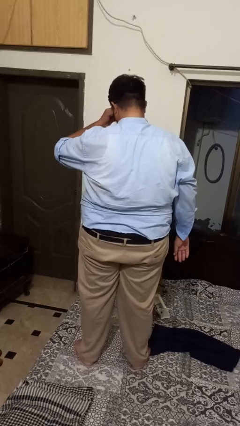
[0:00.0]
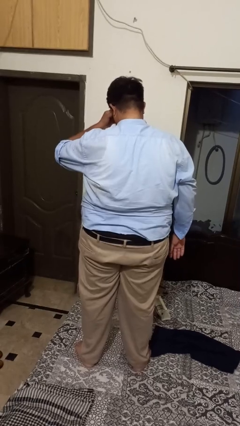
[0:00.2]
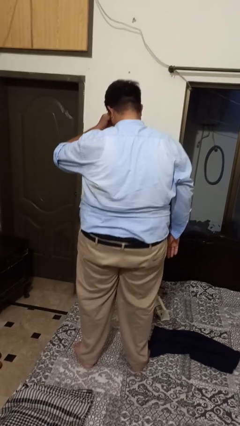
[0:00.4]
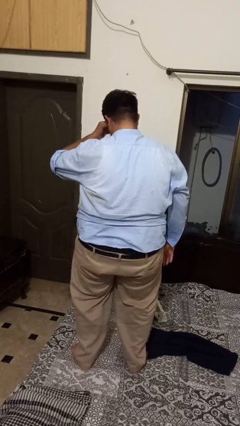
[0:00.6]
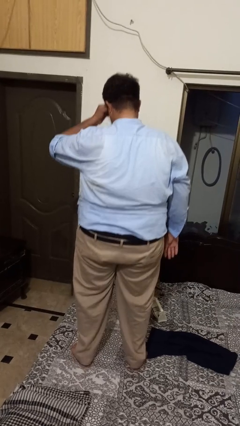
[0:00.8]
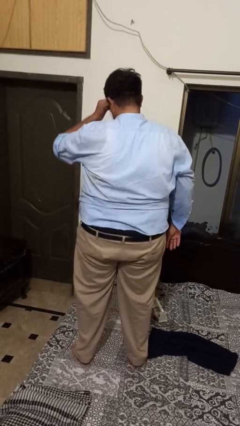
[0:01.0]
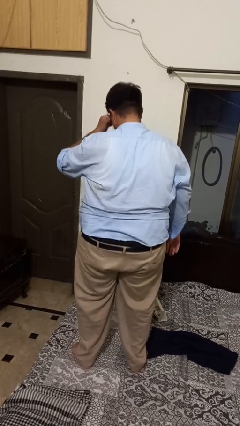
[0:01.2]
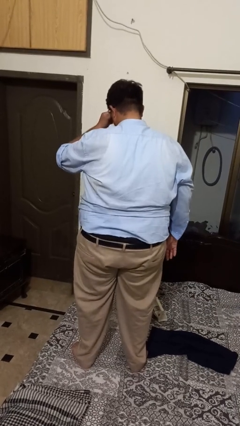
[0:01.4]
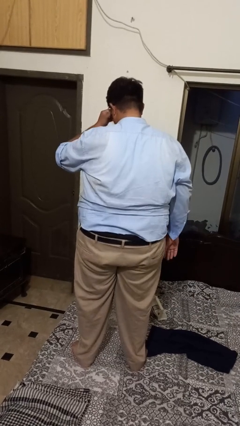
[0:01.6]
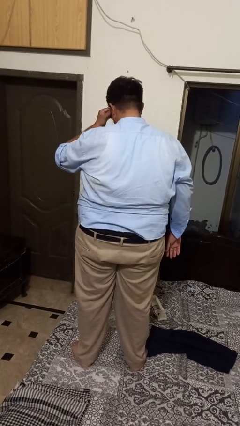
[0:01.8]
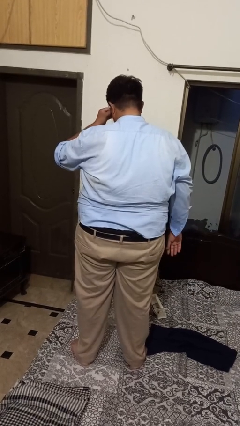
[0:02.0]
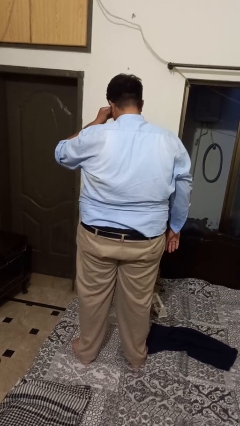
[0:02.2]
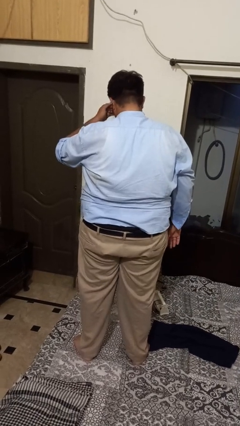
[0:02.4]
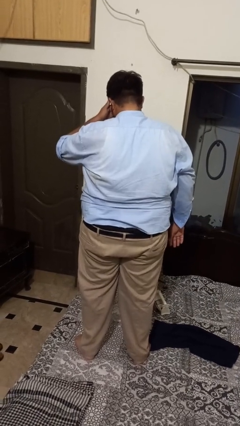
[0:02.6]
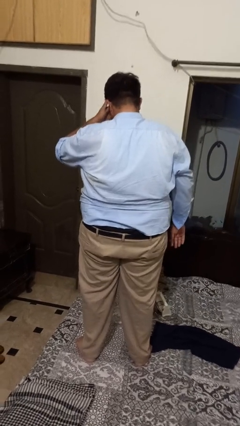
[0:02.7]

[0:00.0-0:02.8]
person jumps on bed

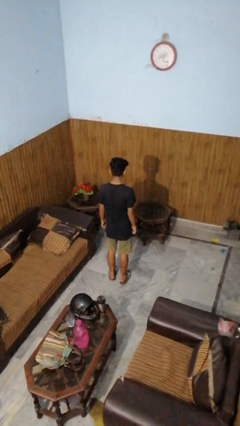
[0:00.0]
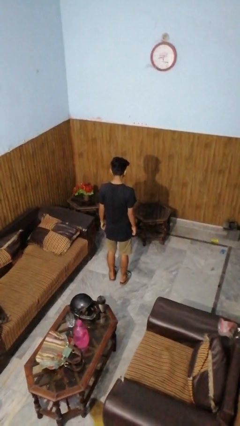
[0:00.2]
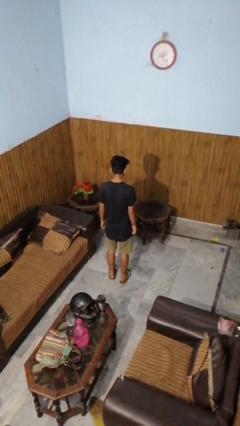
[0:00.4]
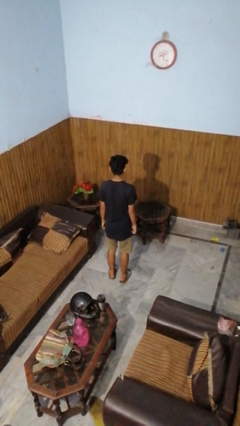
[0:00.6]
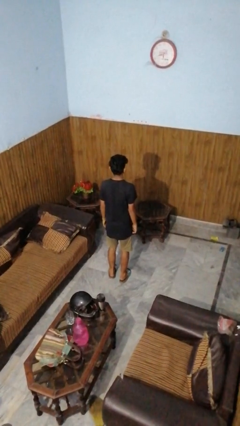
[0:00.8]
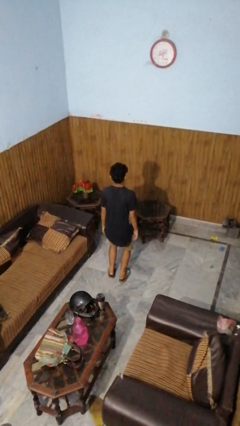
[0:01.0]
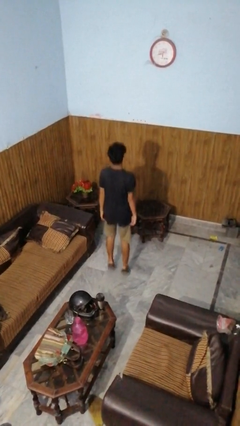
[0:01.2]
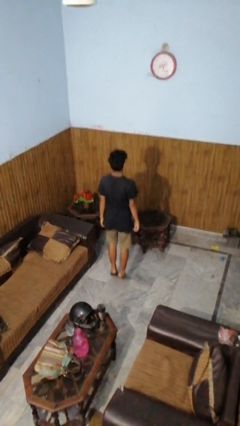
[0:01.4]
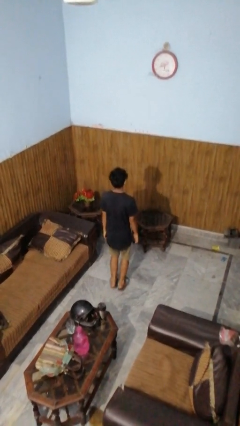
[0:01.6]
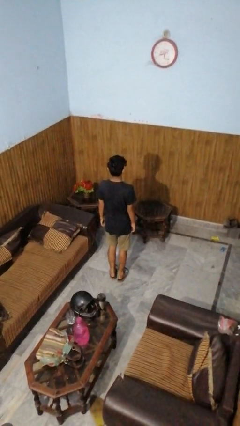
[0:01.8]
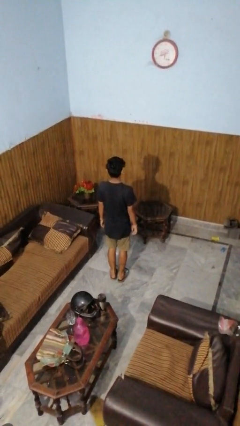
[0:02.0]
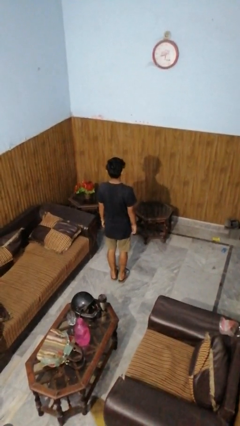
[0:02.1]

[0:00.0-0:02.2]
person jumps

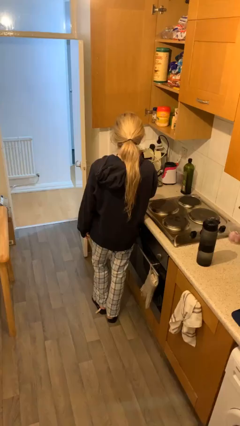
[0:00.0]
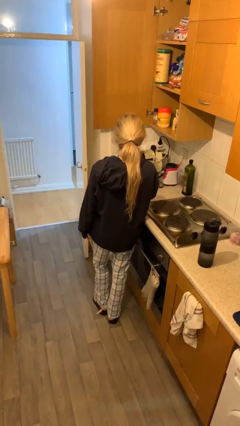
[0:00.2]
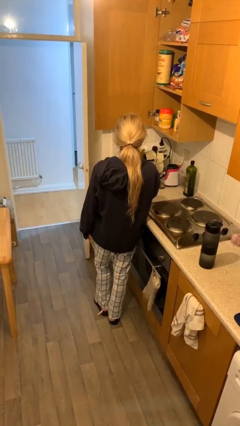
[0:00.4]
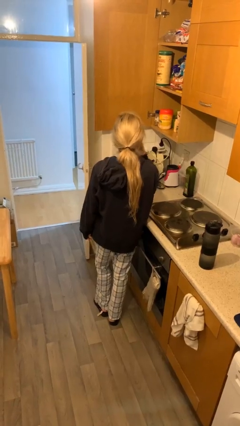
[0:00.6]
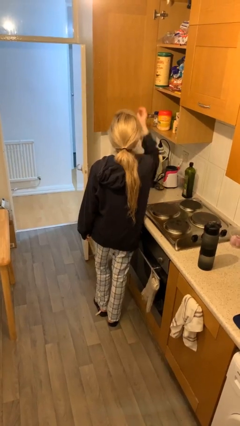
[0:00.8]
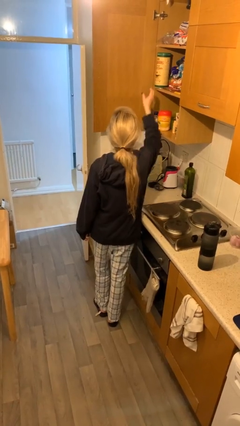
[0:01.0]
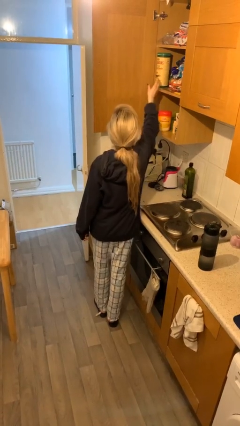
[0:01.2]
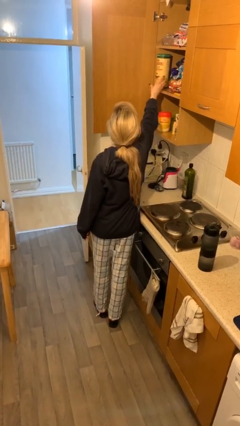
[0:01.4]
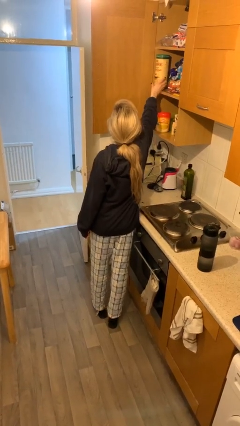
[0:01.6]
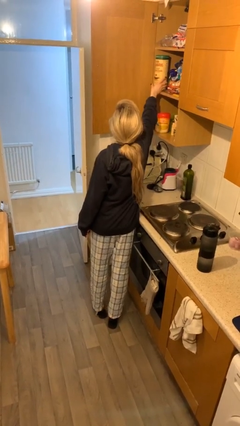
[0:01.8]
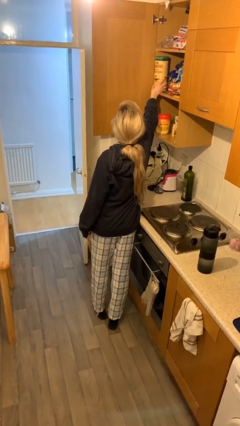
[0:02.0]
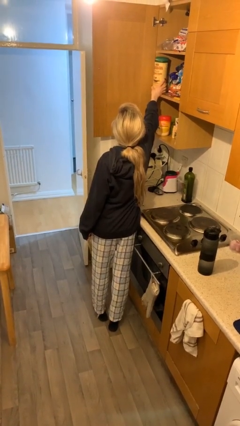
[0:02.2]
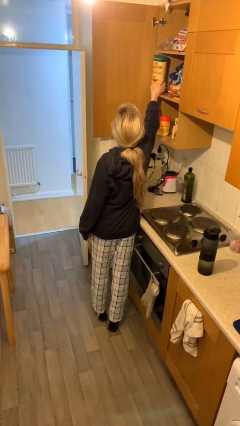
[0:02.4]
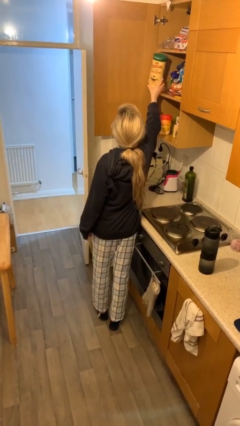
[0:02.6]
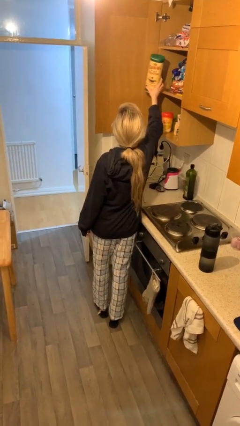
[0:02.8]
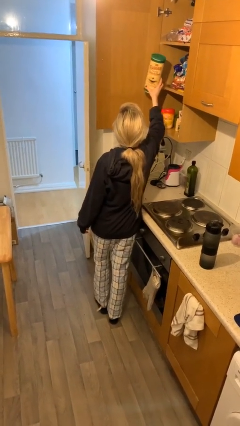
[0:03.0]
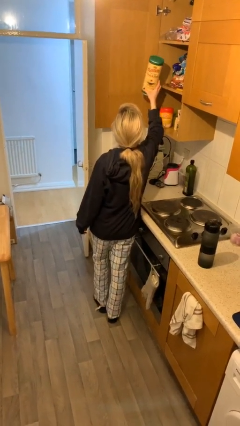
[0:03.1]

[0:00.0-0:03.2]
person picks up object from shelf

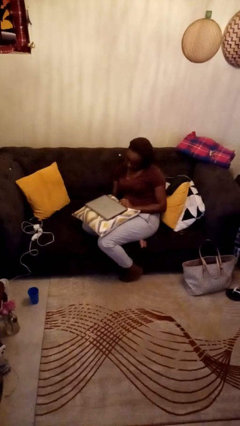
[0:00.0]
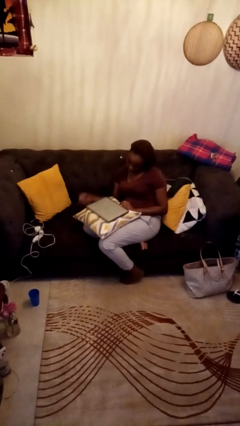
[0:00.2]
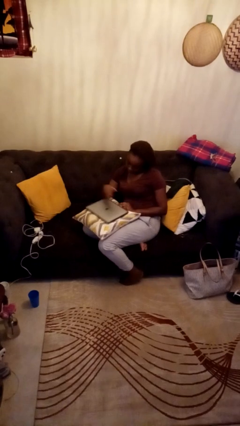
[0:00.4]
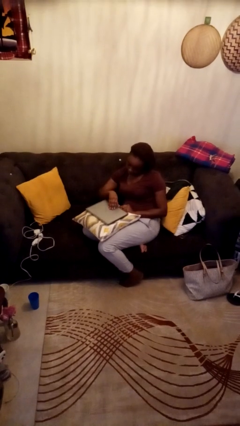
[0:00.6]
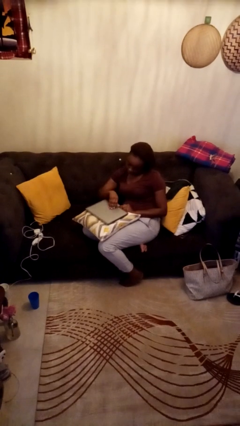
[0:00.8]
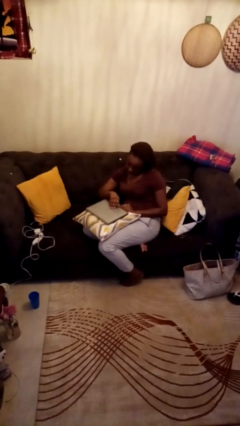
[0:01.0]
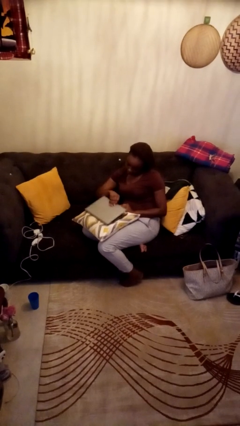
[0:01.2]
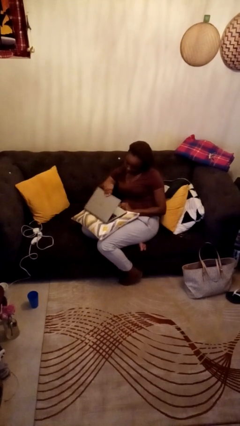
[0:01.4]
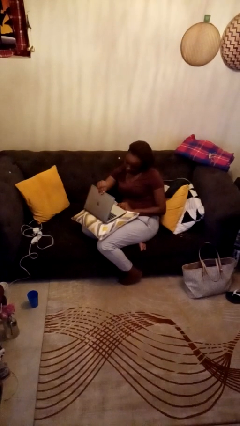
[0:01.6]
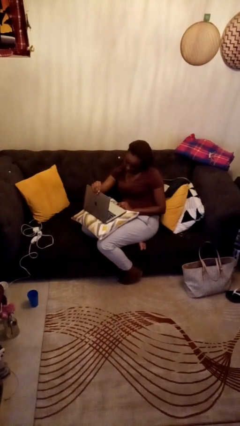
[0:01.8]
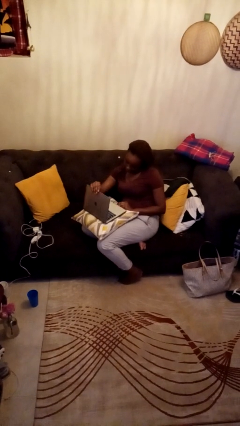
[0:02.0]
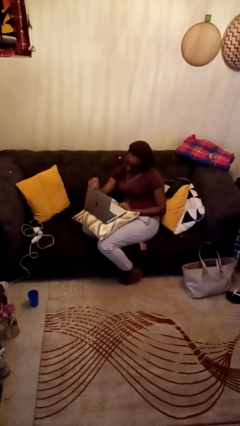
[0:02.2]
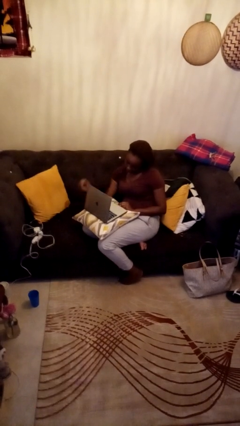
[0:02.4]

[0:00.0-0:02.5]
person opens laptop

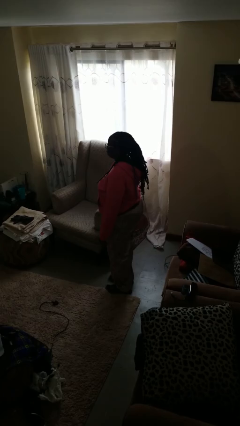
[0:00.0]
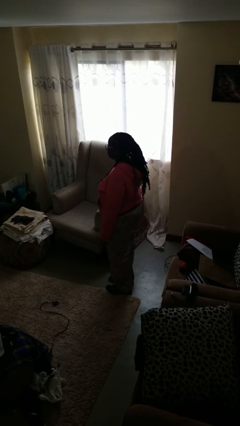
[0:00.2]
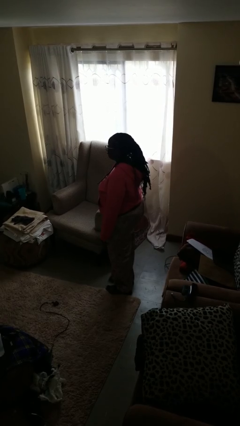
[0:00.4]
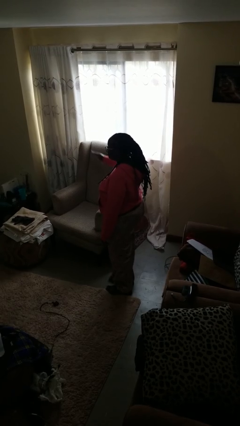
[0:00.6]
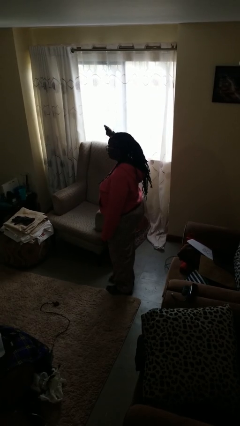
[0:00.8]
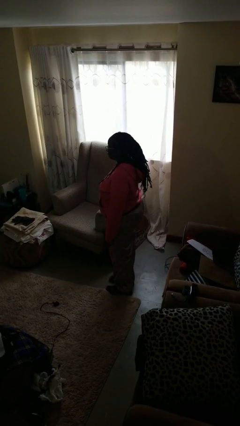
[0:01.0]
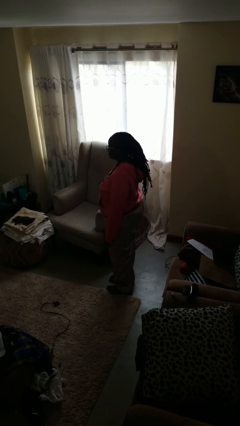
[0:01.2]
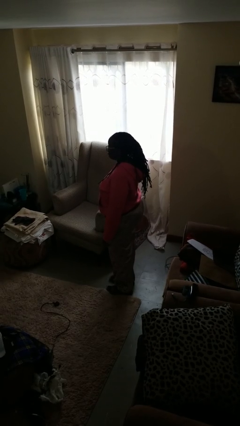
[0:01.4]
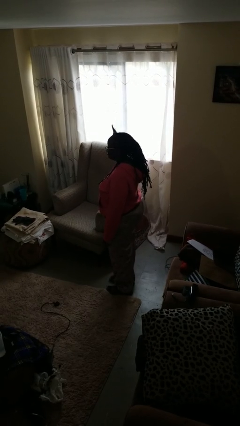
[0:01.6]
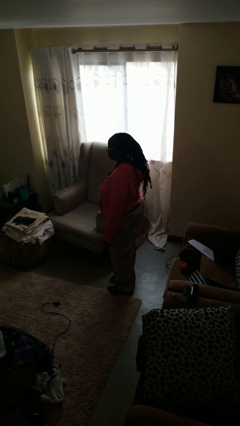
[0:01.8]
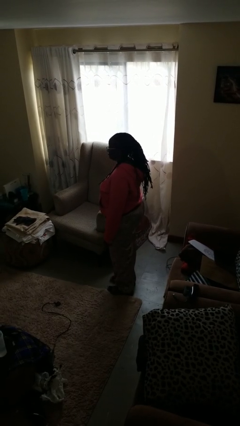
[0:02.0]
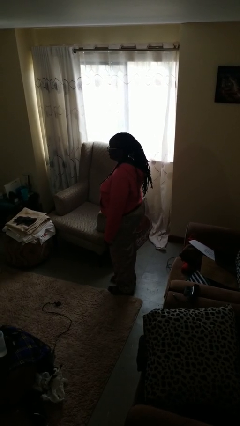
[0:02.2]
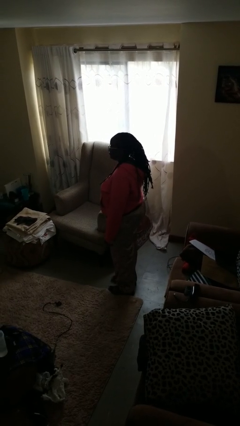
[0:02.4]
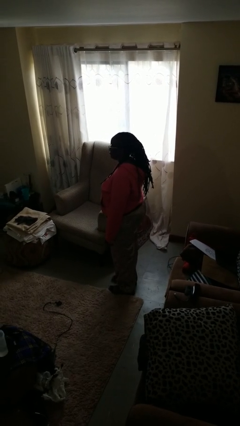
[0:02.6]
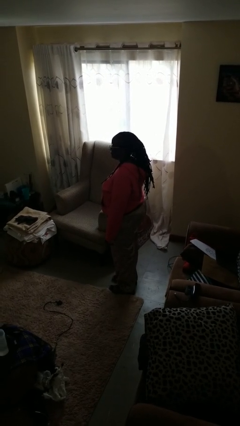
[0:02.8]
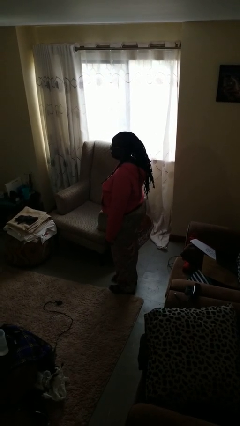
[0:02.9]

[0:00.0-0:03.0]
person salutes

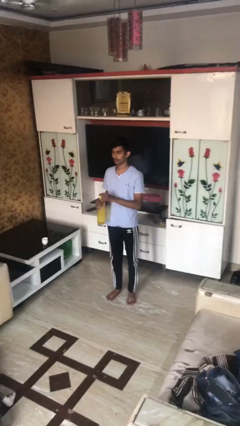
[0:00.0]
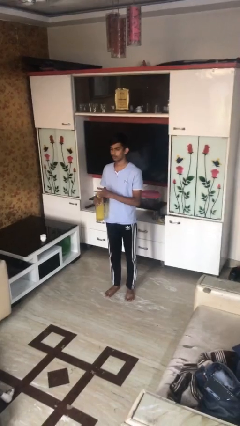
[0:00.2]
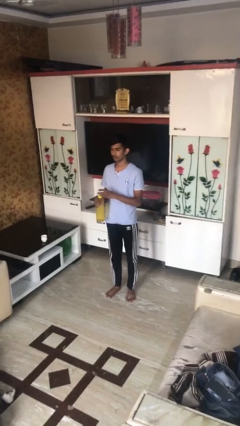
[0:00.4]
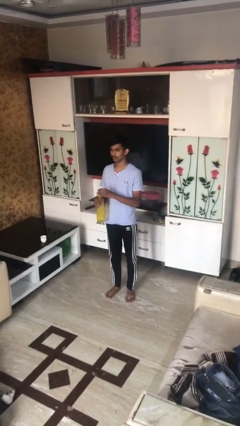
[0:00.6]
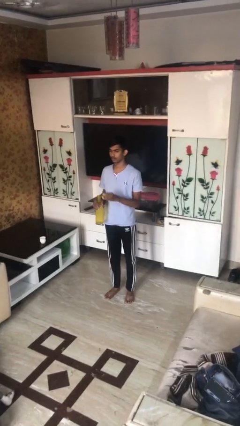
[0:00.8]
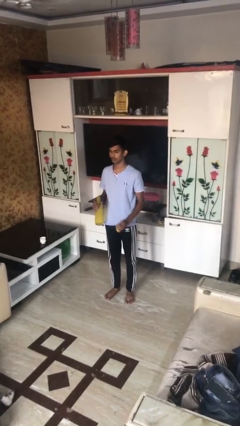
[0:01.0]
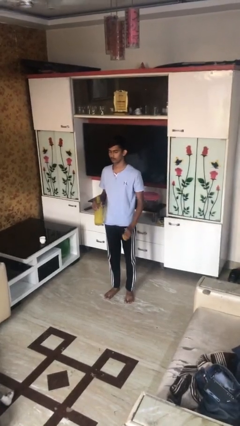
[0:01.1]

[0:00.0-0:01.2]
person unscrews lid from bottle

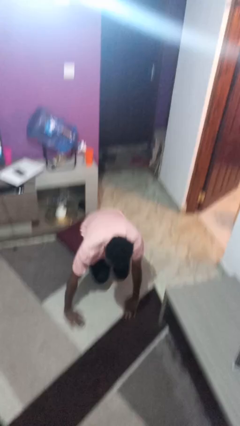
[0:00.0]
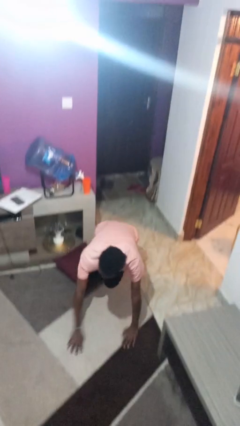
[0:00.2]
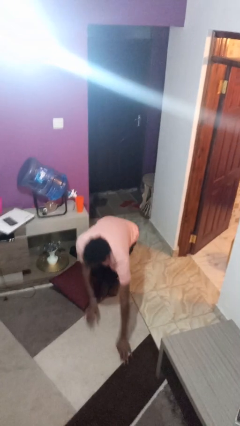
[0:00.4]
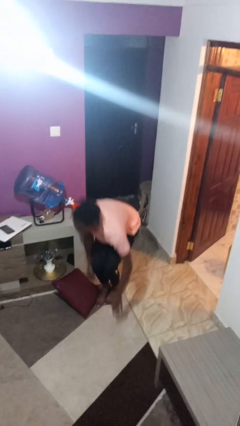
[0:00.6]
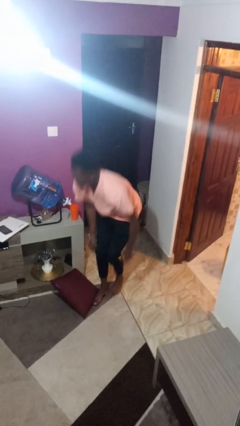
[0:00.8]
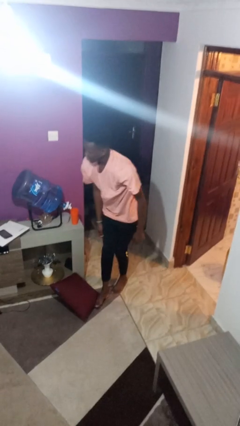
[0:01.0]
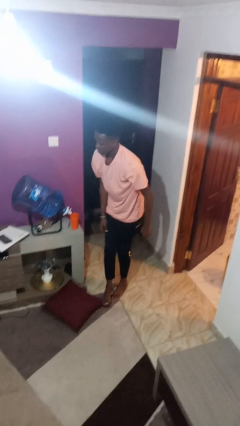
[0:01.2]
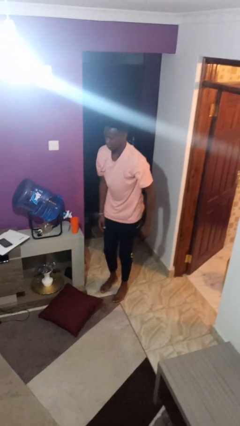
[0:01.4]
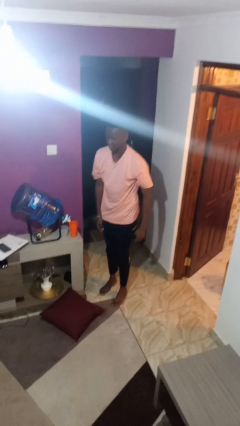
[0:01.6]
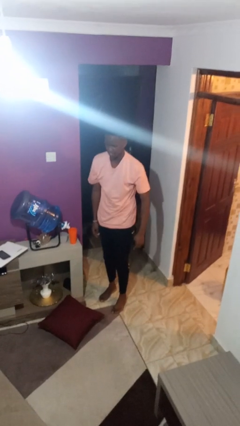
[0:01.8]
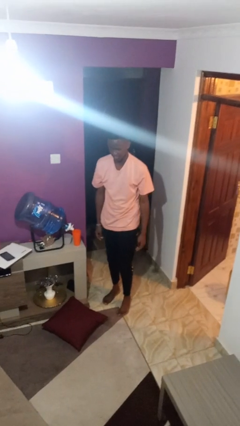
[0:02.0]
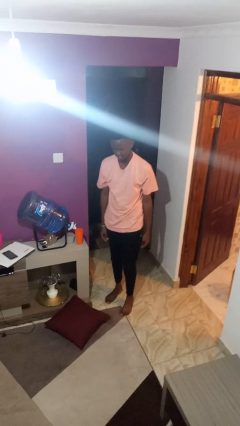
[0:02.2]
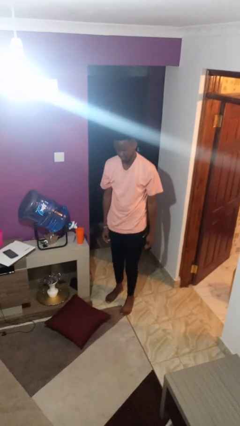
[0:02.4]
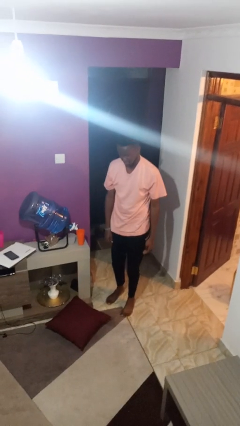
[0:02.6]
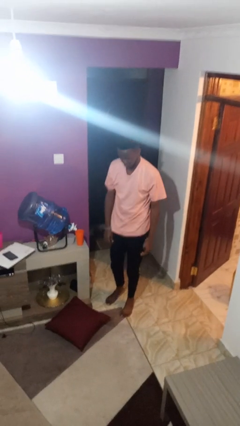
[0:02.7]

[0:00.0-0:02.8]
person stands up from floor
